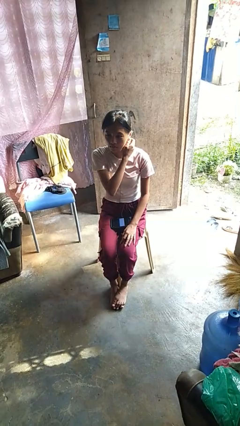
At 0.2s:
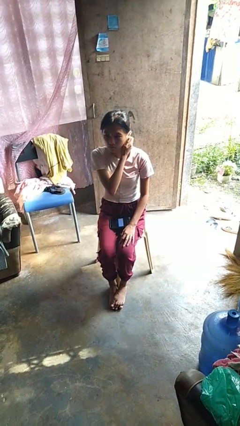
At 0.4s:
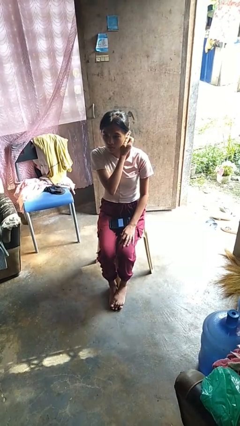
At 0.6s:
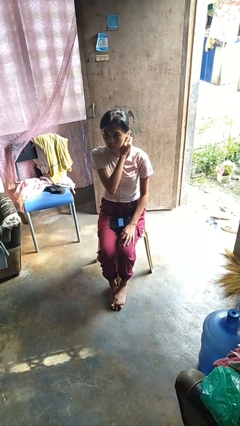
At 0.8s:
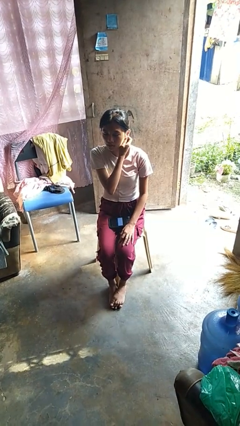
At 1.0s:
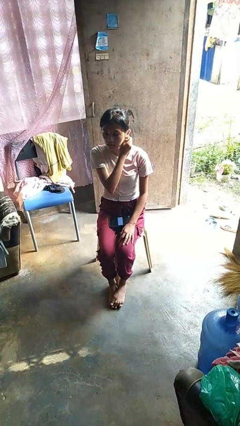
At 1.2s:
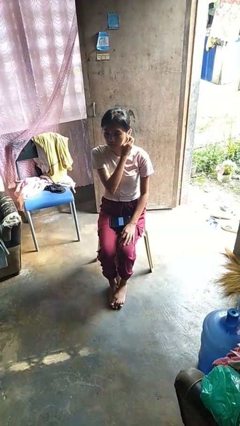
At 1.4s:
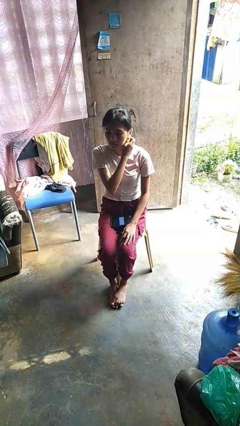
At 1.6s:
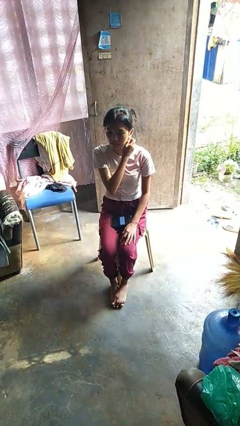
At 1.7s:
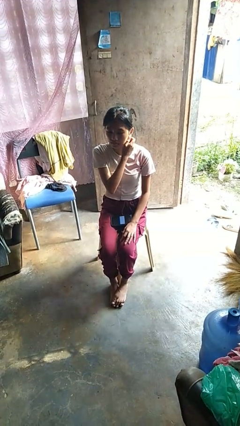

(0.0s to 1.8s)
person touches earlobe

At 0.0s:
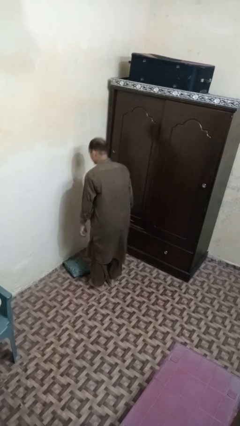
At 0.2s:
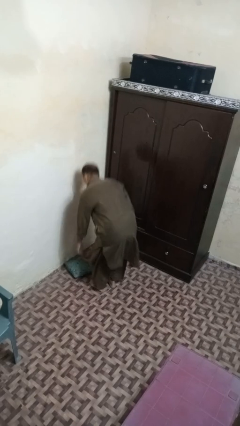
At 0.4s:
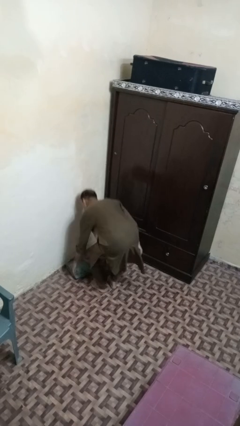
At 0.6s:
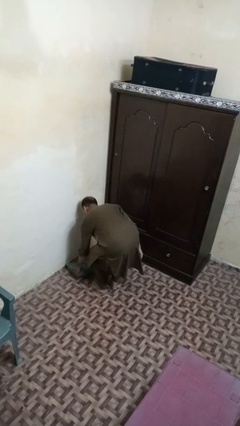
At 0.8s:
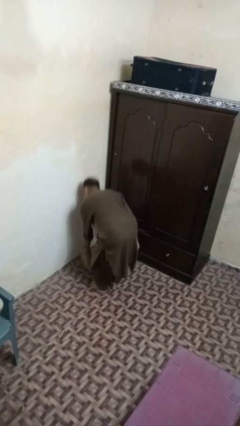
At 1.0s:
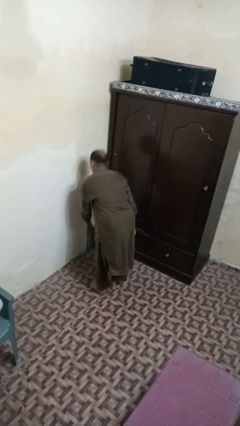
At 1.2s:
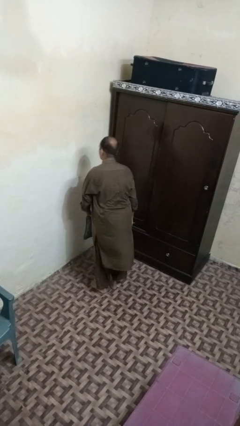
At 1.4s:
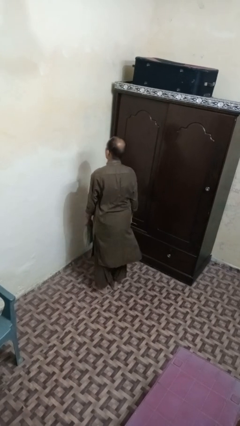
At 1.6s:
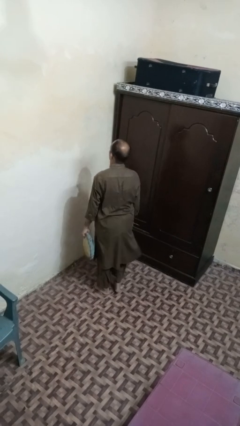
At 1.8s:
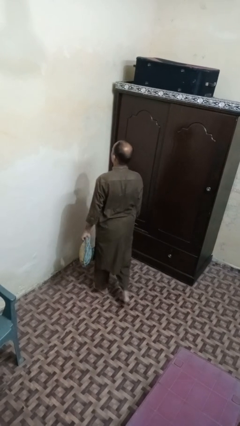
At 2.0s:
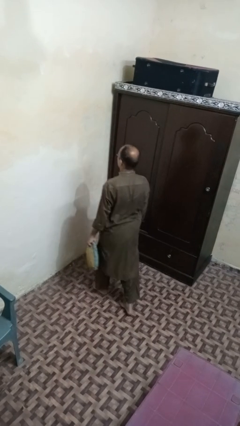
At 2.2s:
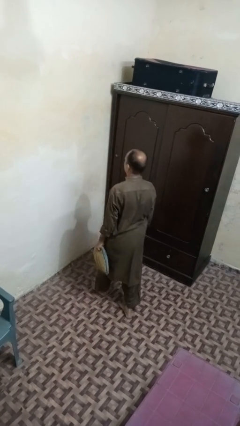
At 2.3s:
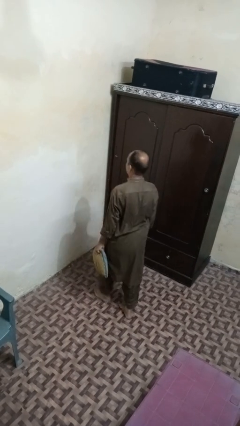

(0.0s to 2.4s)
person picks up object from floor

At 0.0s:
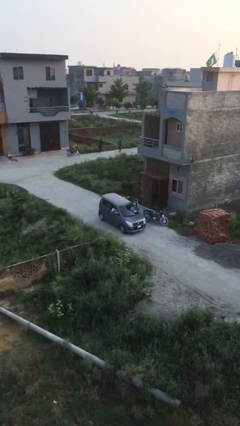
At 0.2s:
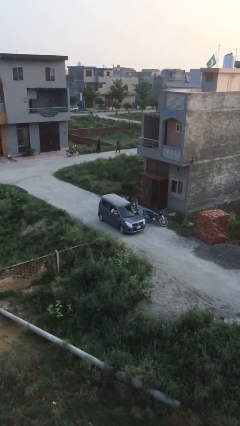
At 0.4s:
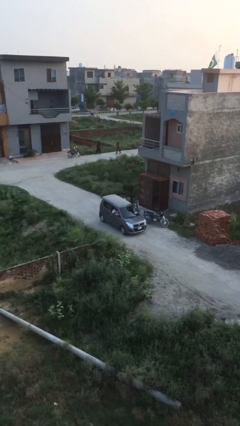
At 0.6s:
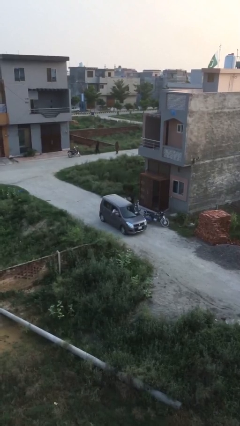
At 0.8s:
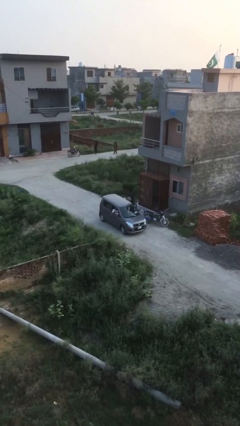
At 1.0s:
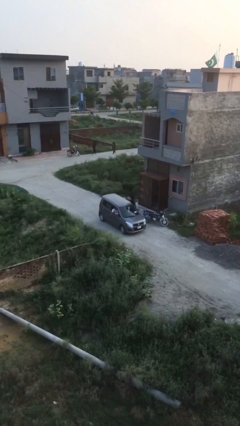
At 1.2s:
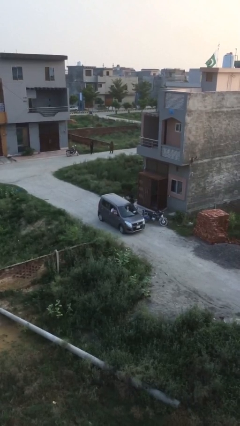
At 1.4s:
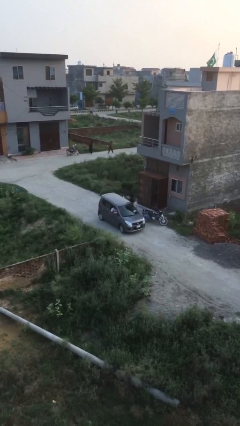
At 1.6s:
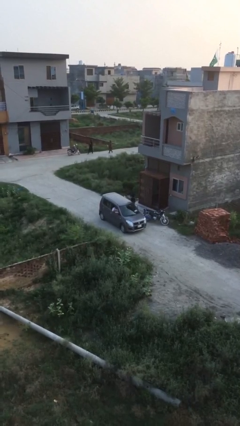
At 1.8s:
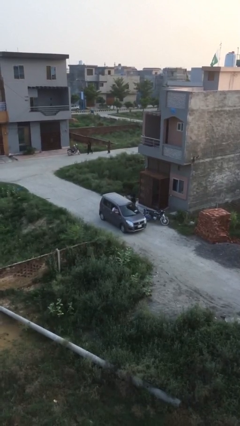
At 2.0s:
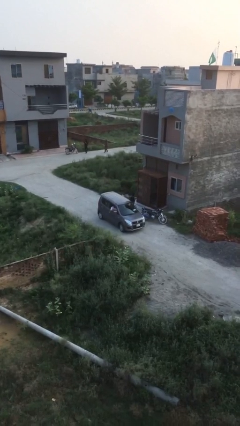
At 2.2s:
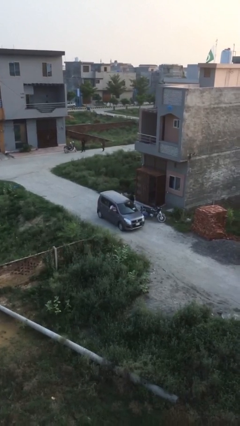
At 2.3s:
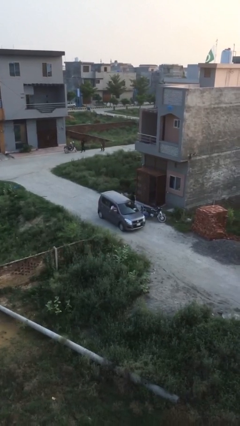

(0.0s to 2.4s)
car drops off person

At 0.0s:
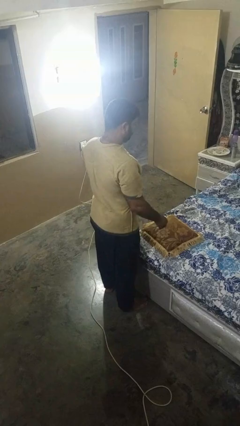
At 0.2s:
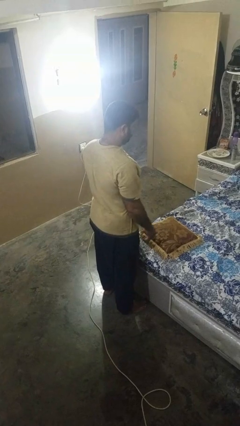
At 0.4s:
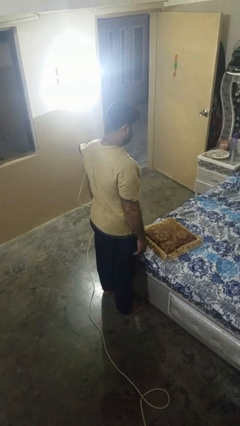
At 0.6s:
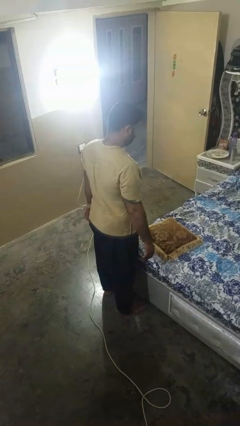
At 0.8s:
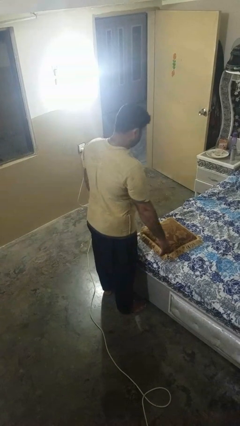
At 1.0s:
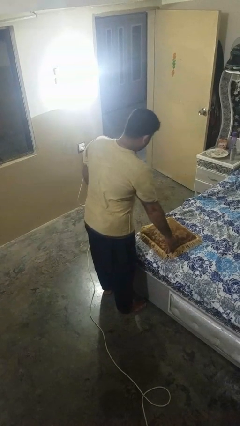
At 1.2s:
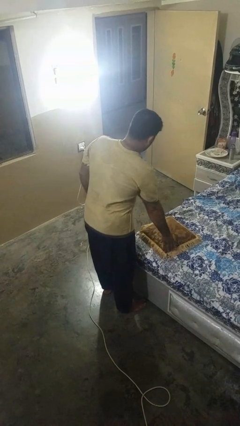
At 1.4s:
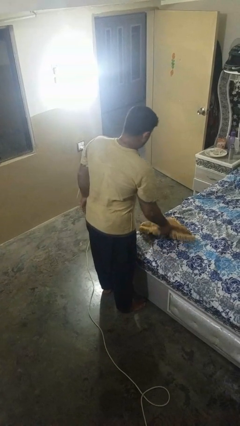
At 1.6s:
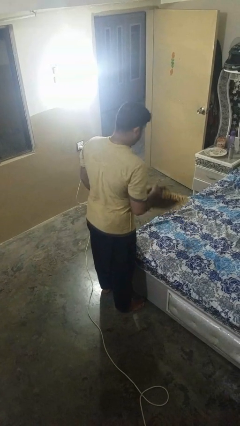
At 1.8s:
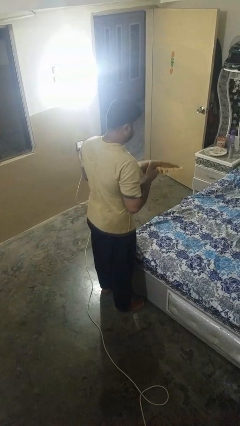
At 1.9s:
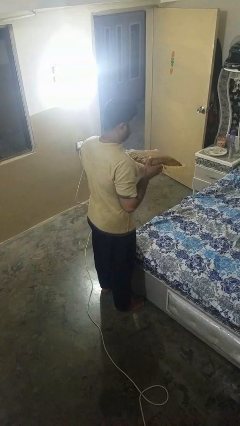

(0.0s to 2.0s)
person picks up object from bed

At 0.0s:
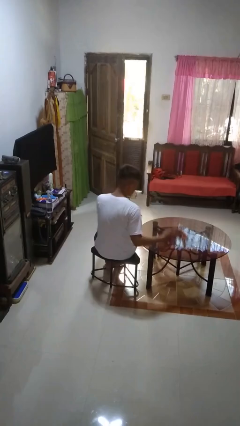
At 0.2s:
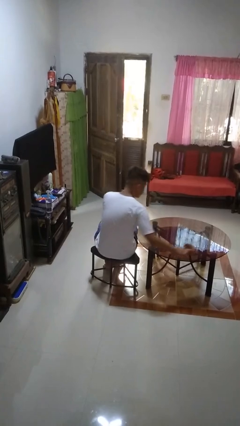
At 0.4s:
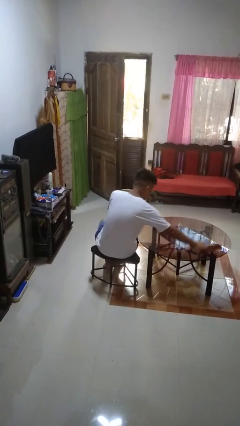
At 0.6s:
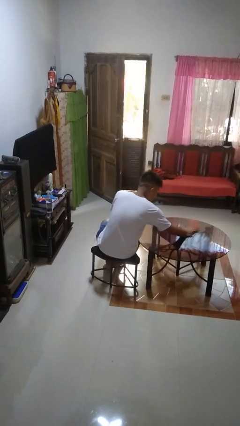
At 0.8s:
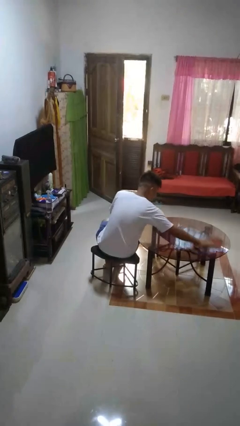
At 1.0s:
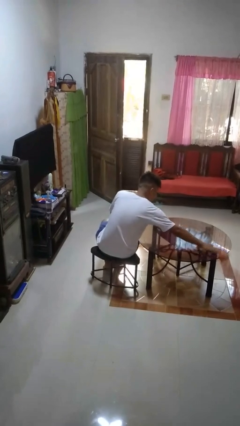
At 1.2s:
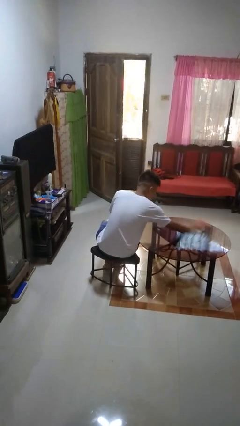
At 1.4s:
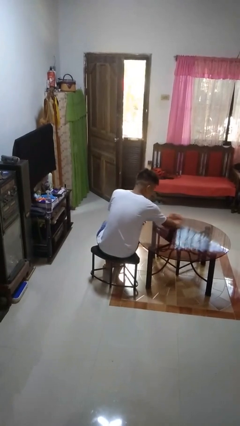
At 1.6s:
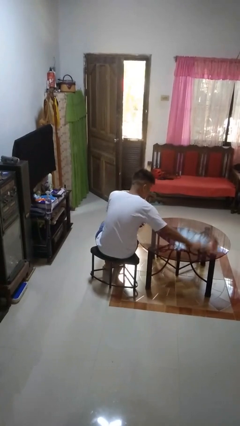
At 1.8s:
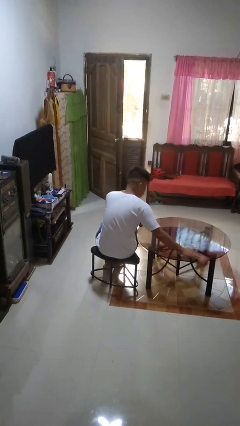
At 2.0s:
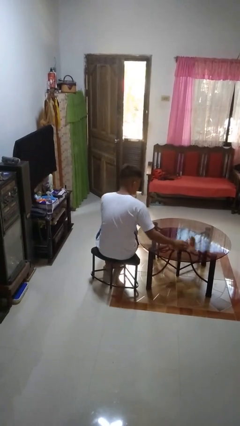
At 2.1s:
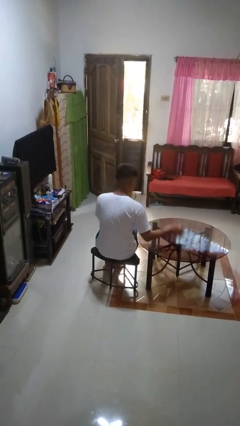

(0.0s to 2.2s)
person cleans table with rag

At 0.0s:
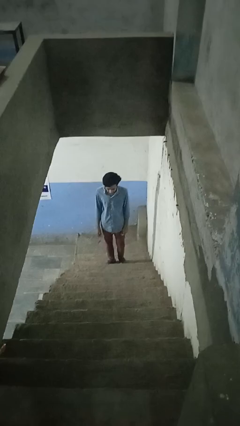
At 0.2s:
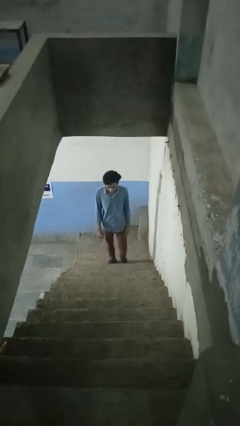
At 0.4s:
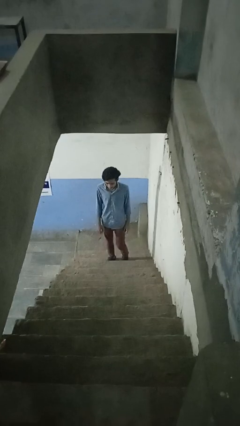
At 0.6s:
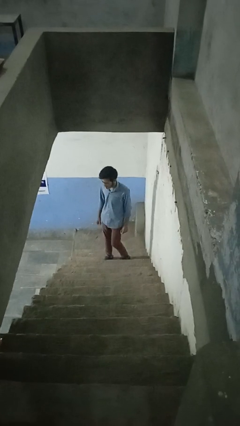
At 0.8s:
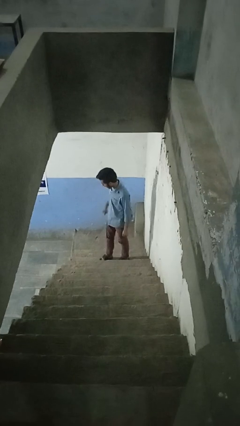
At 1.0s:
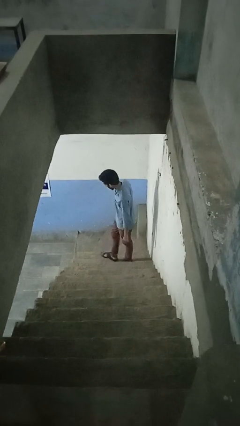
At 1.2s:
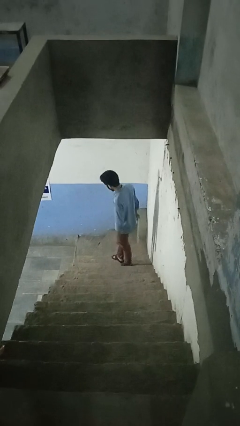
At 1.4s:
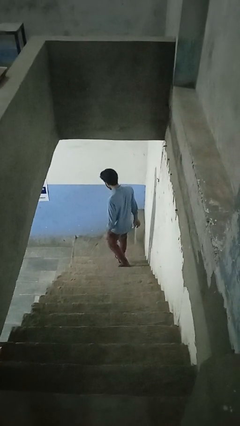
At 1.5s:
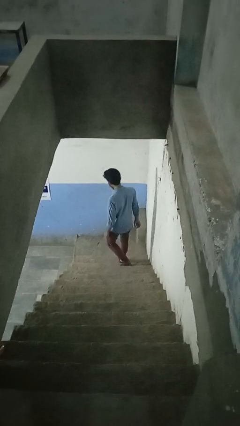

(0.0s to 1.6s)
person climbs down stairs

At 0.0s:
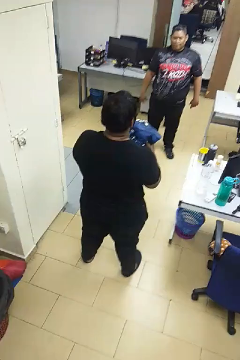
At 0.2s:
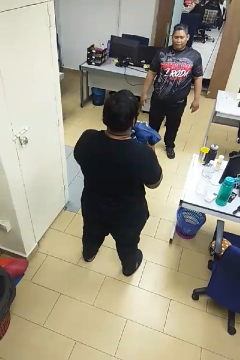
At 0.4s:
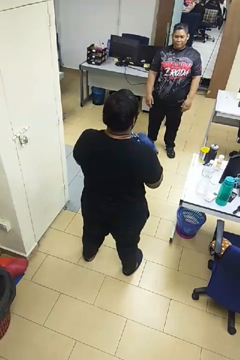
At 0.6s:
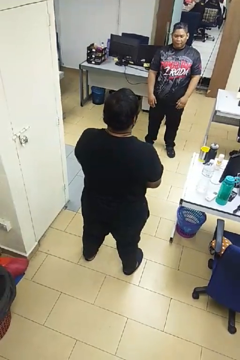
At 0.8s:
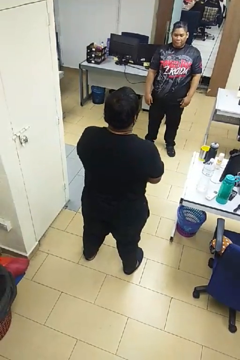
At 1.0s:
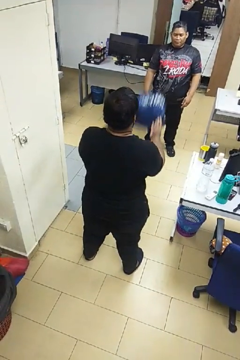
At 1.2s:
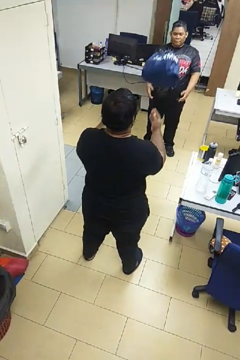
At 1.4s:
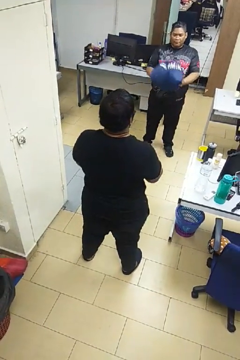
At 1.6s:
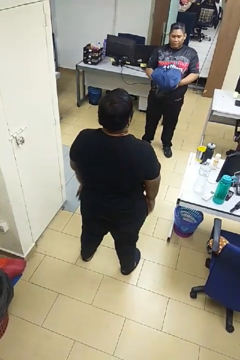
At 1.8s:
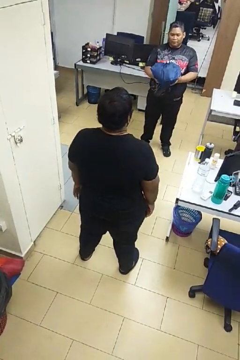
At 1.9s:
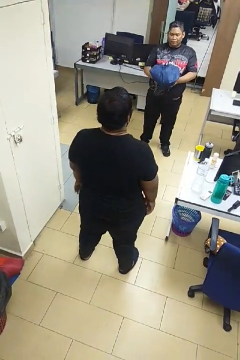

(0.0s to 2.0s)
person throws object to person

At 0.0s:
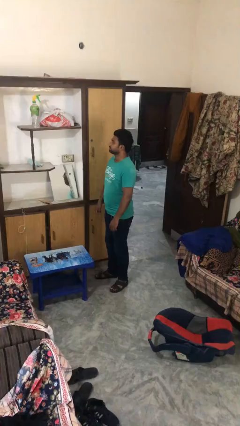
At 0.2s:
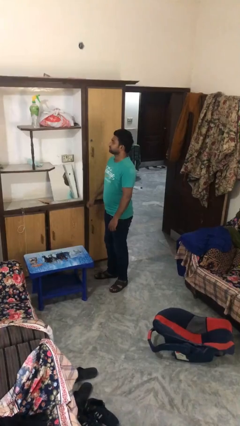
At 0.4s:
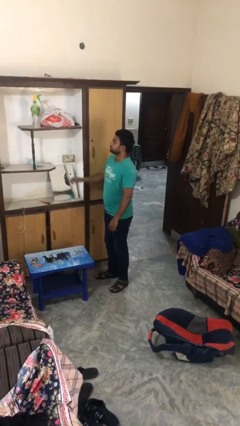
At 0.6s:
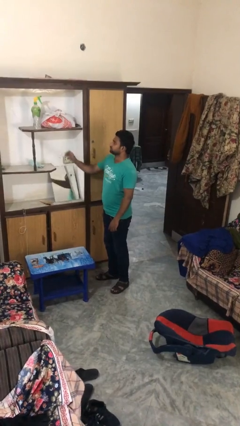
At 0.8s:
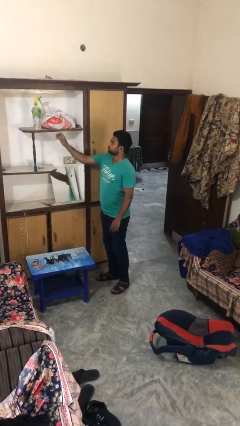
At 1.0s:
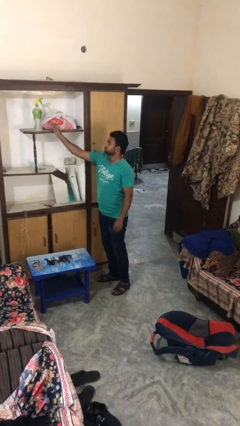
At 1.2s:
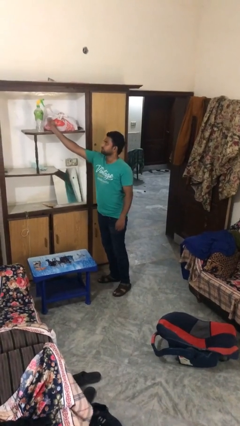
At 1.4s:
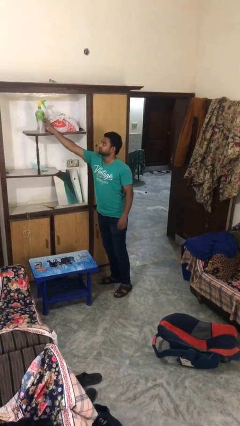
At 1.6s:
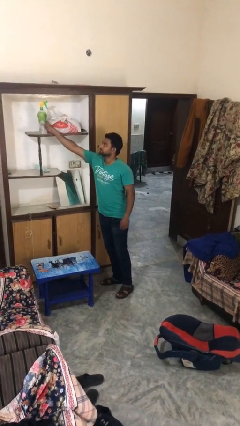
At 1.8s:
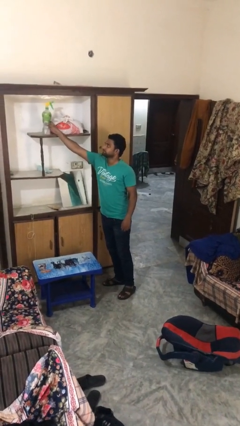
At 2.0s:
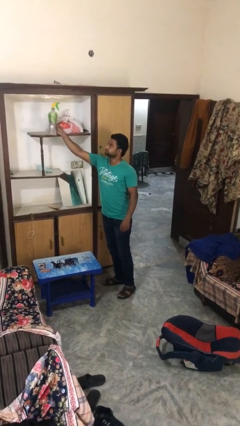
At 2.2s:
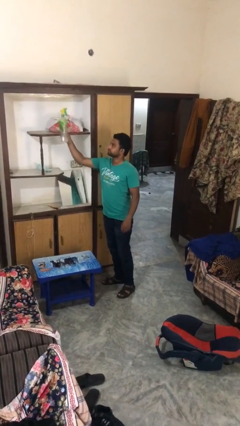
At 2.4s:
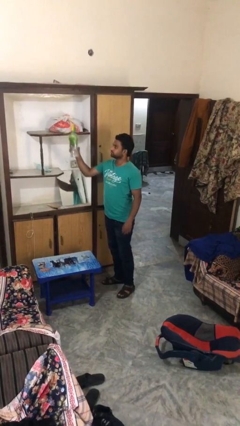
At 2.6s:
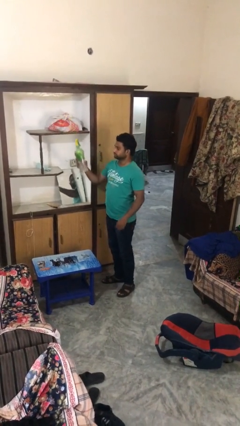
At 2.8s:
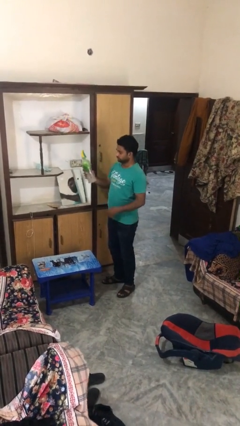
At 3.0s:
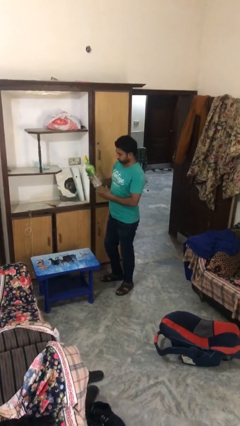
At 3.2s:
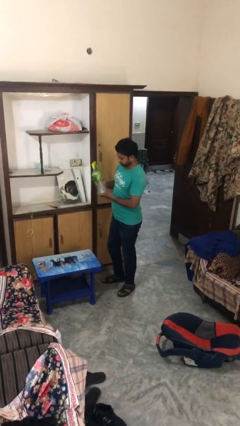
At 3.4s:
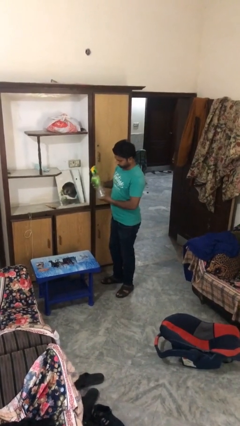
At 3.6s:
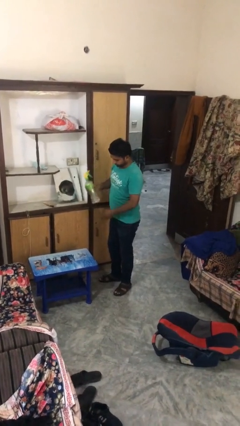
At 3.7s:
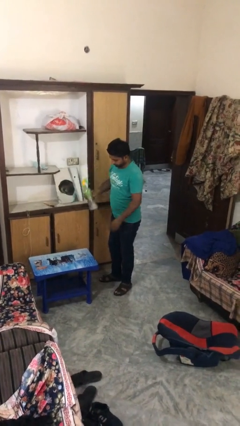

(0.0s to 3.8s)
person picks up object from shelf
